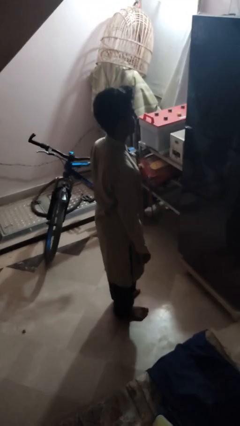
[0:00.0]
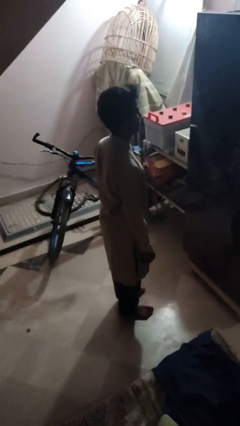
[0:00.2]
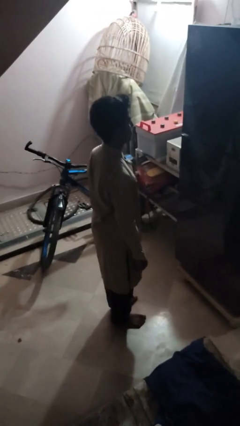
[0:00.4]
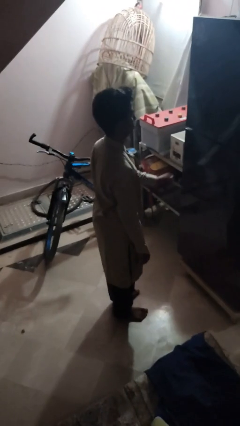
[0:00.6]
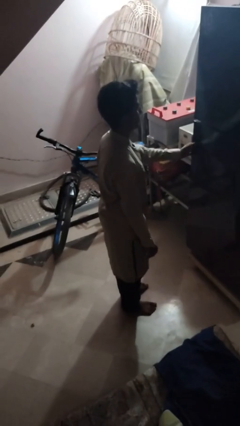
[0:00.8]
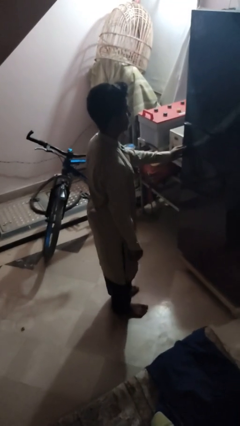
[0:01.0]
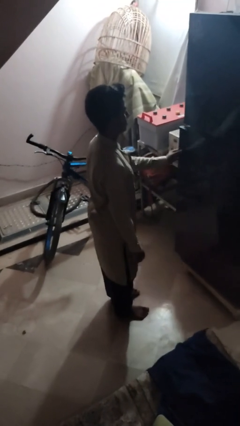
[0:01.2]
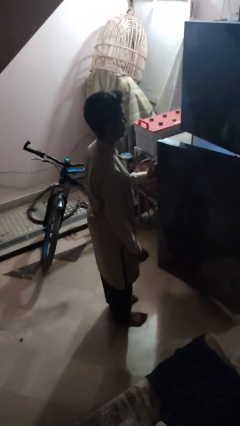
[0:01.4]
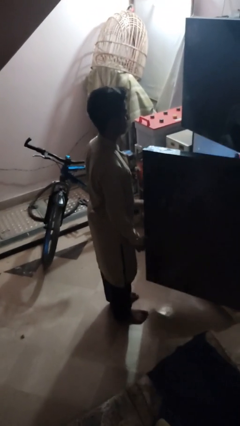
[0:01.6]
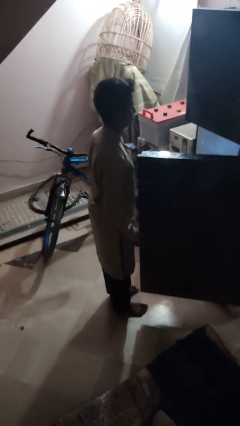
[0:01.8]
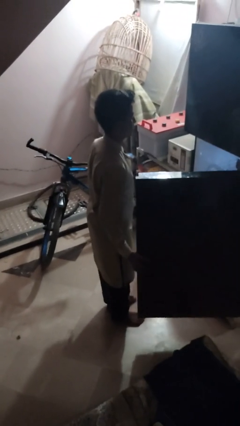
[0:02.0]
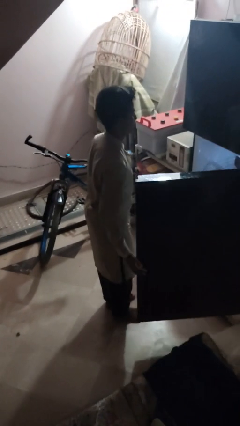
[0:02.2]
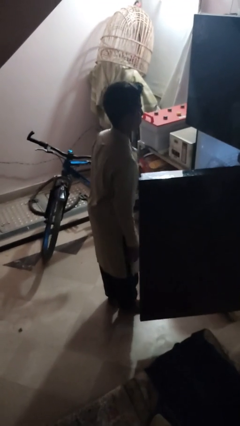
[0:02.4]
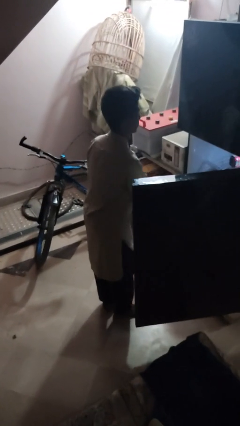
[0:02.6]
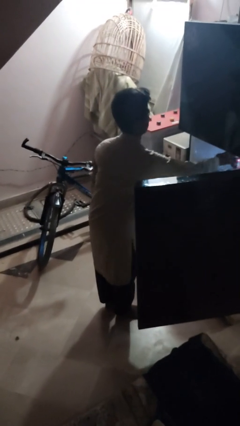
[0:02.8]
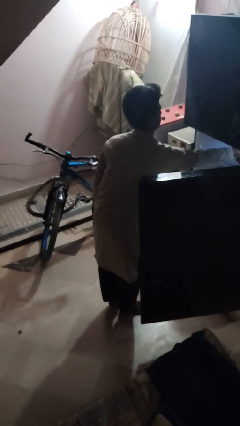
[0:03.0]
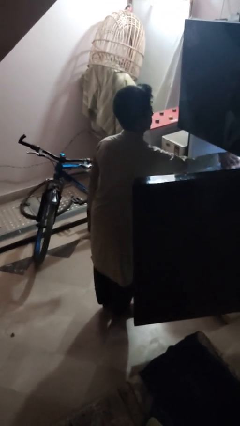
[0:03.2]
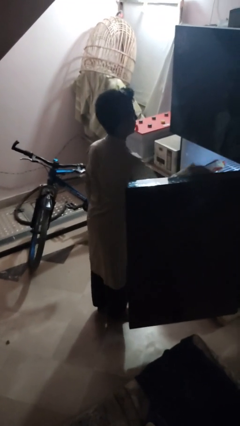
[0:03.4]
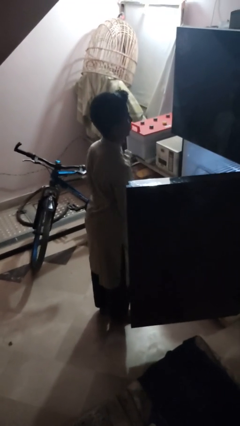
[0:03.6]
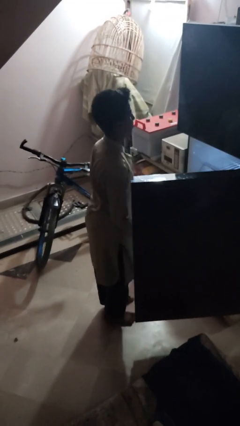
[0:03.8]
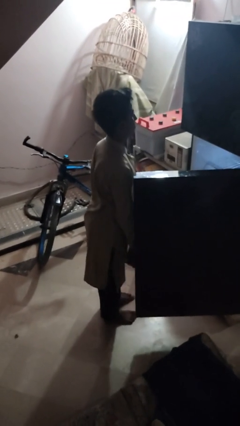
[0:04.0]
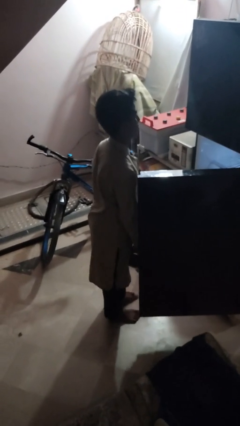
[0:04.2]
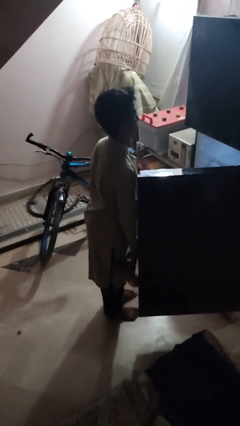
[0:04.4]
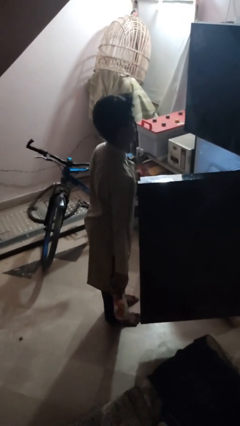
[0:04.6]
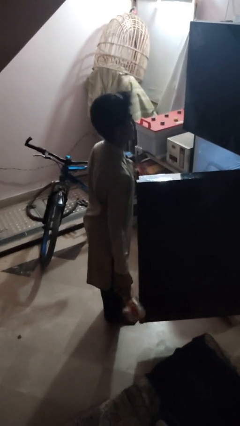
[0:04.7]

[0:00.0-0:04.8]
person takes object from refrigerator

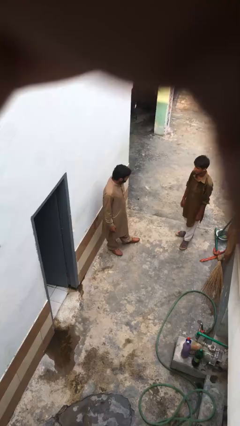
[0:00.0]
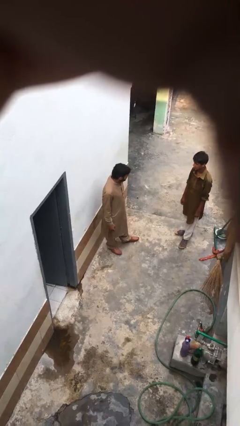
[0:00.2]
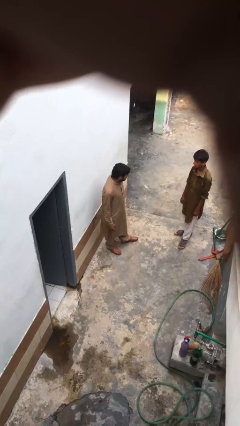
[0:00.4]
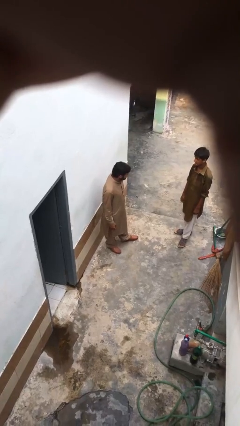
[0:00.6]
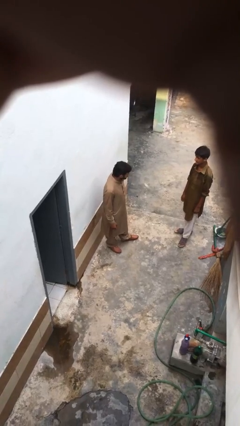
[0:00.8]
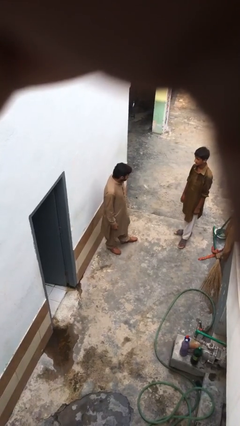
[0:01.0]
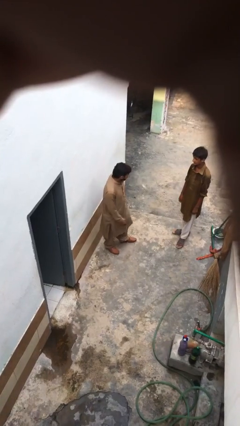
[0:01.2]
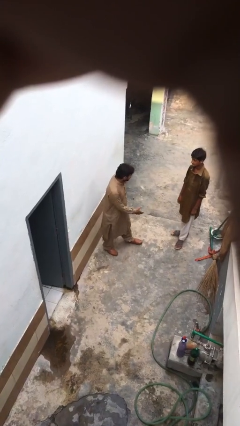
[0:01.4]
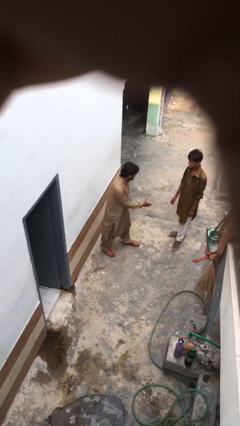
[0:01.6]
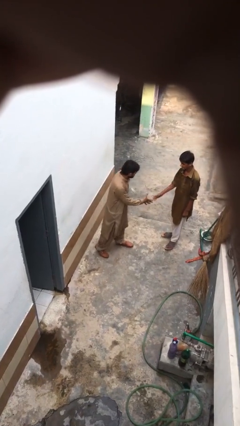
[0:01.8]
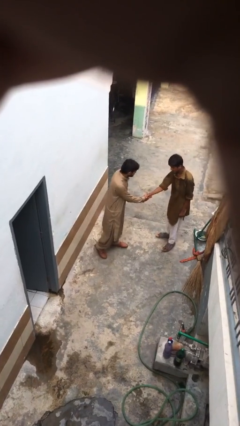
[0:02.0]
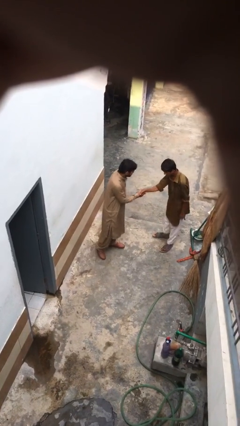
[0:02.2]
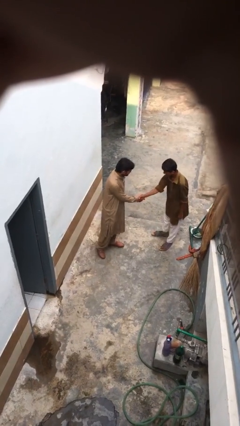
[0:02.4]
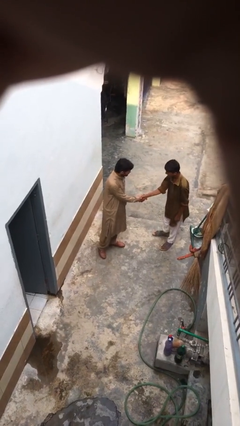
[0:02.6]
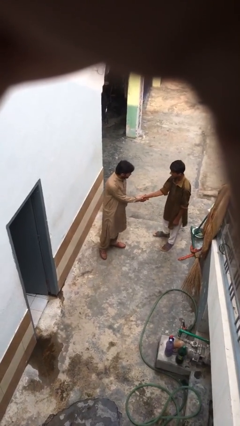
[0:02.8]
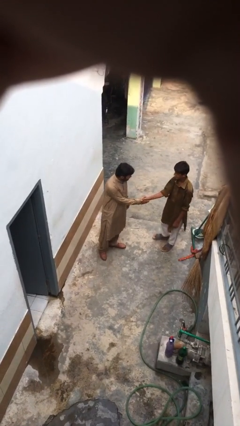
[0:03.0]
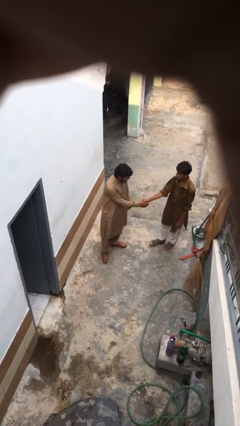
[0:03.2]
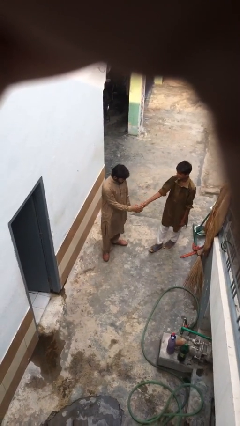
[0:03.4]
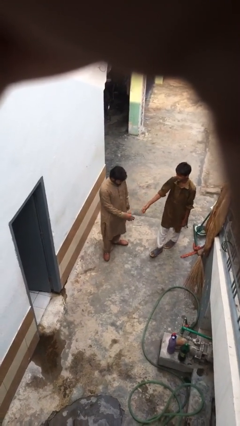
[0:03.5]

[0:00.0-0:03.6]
person shakes hand

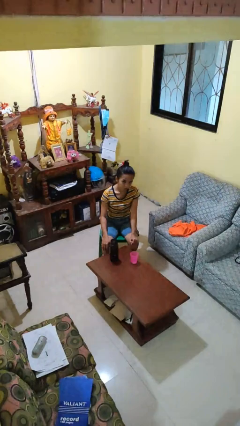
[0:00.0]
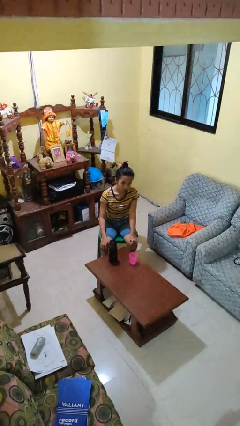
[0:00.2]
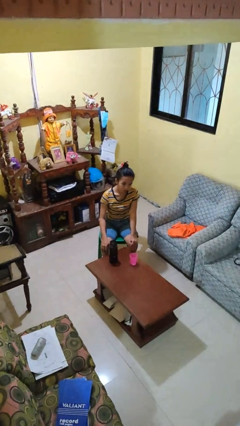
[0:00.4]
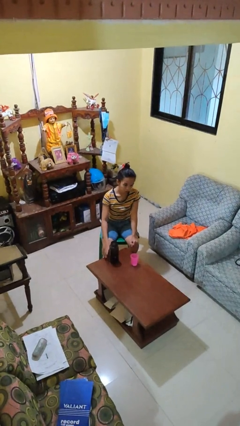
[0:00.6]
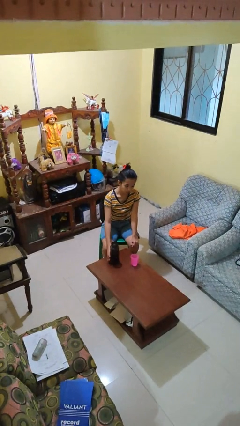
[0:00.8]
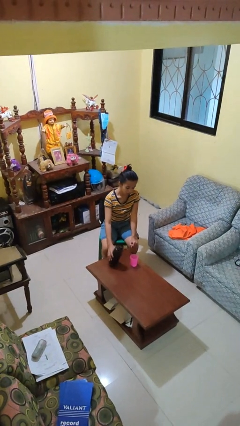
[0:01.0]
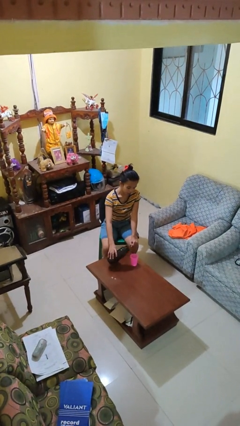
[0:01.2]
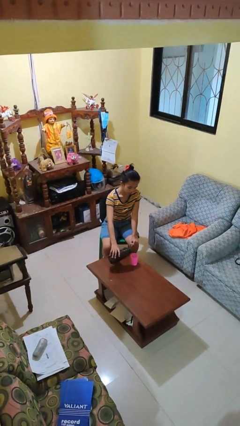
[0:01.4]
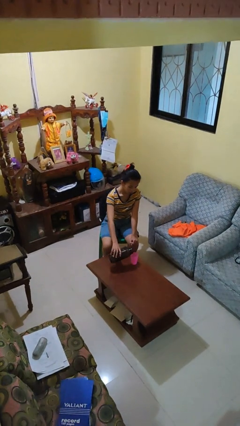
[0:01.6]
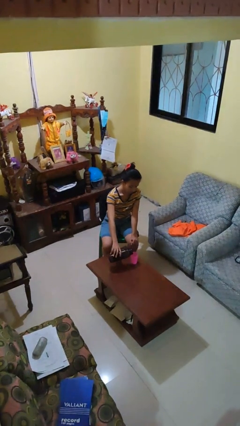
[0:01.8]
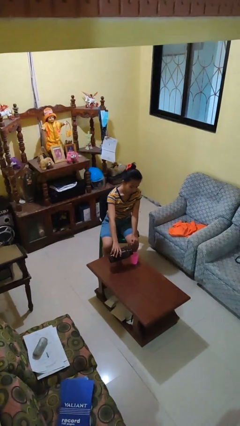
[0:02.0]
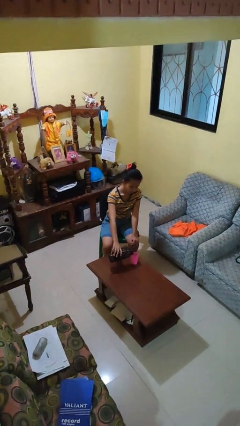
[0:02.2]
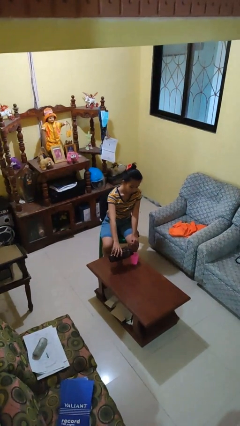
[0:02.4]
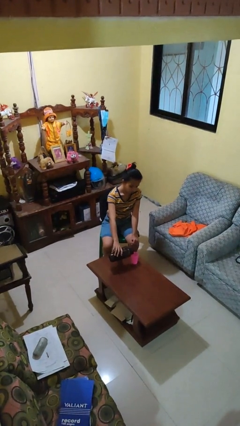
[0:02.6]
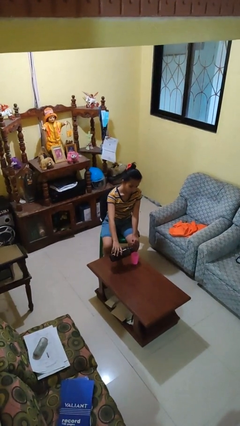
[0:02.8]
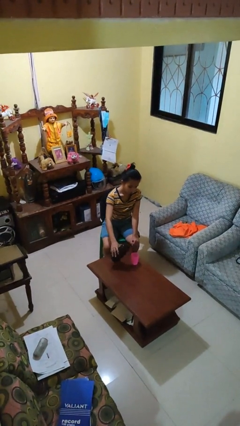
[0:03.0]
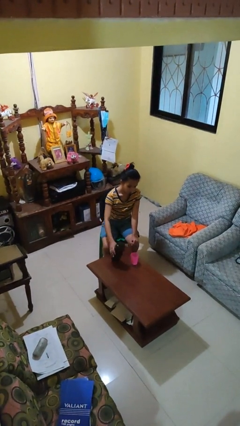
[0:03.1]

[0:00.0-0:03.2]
person pours liquid into cup

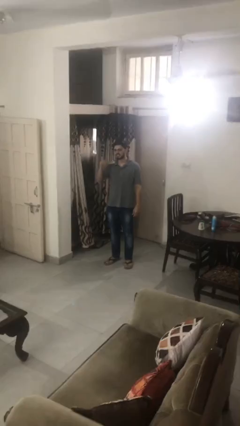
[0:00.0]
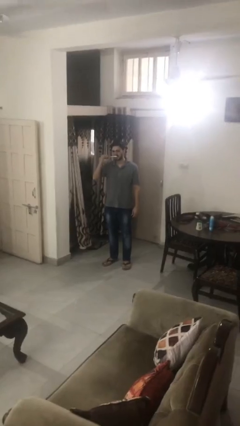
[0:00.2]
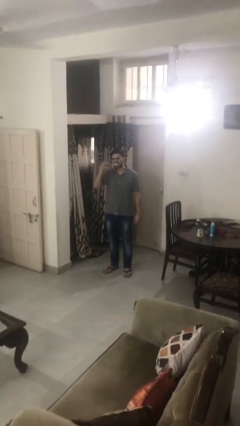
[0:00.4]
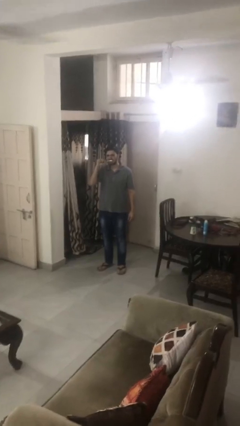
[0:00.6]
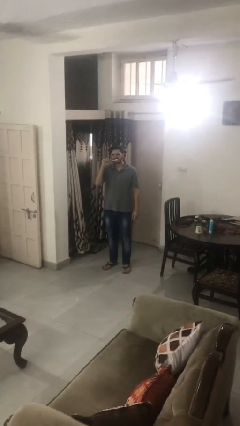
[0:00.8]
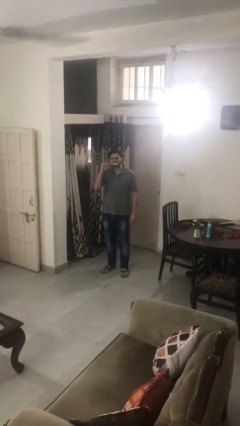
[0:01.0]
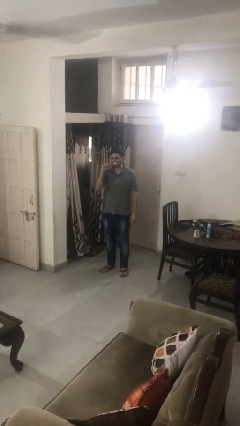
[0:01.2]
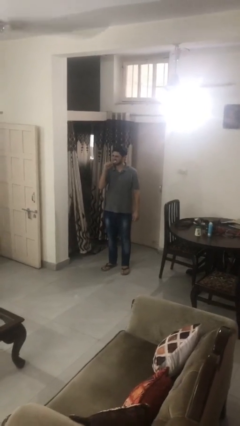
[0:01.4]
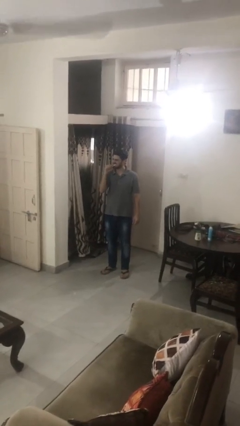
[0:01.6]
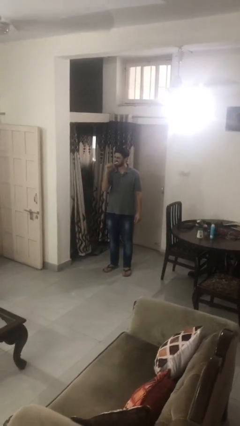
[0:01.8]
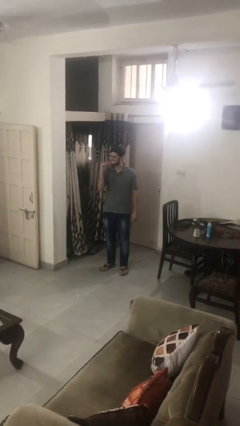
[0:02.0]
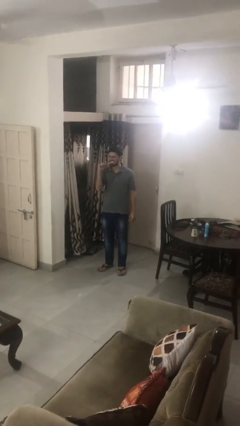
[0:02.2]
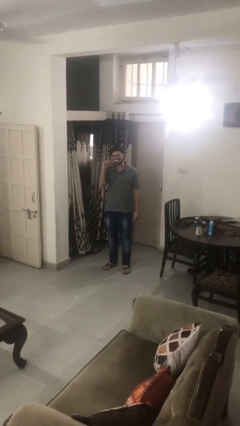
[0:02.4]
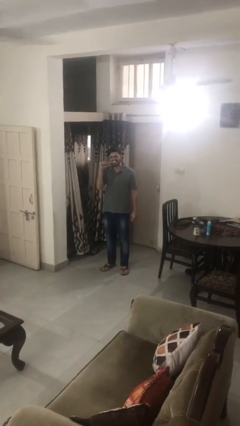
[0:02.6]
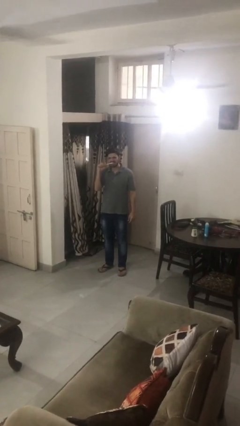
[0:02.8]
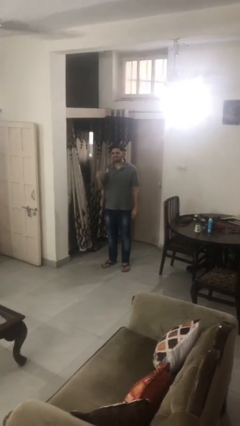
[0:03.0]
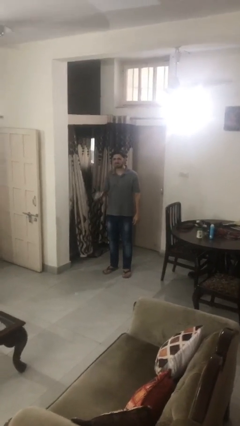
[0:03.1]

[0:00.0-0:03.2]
person brushes teeth

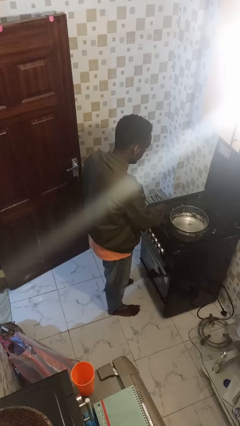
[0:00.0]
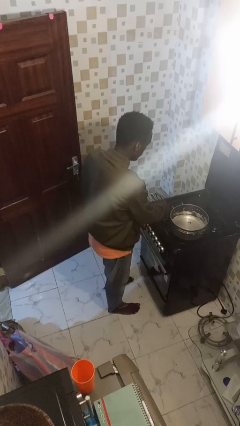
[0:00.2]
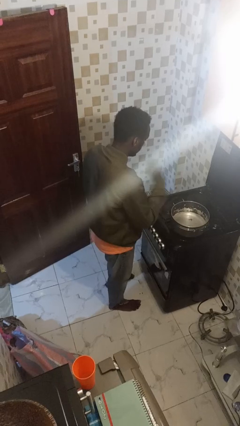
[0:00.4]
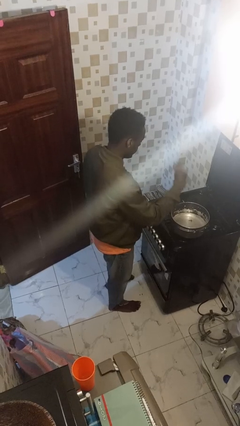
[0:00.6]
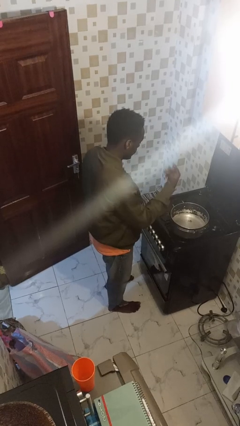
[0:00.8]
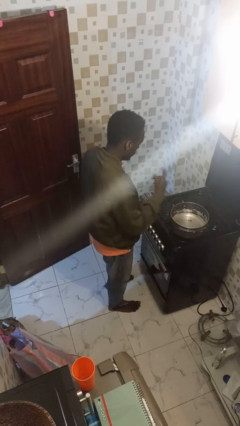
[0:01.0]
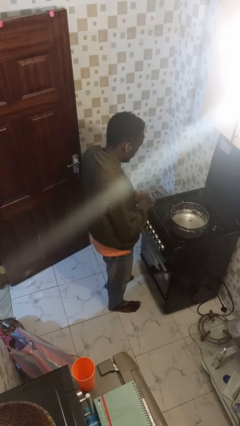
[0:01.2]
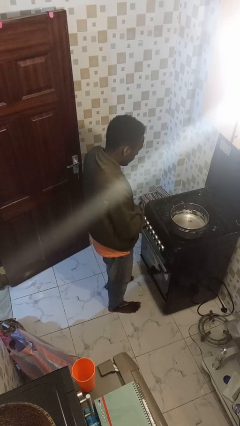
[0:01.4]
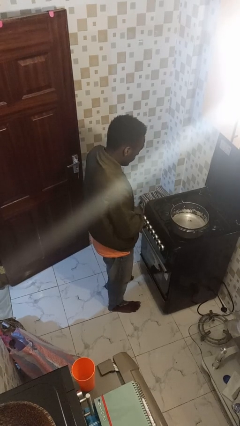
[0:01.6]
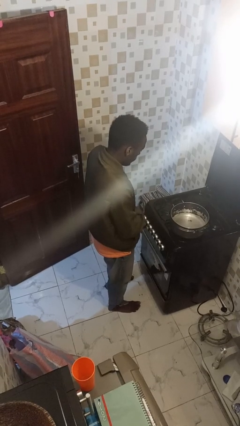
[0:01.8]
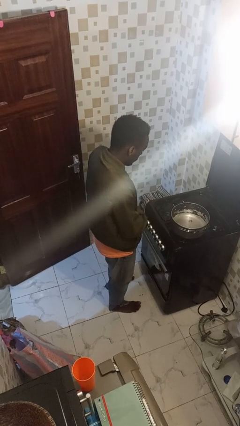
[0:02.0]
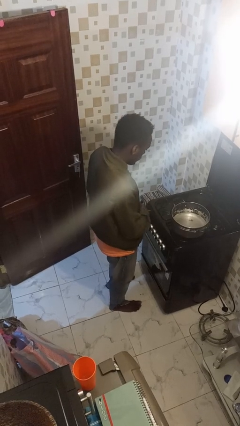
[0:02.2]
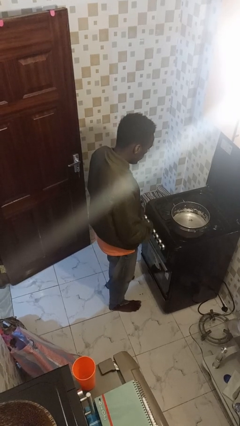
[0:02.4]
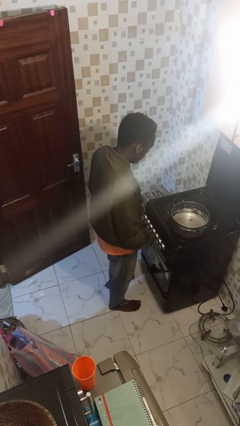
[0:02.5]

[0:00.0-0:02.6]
person burns hand

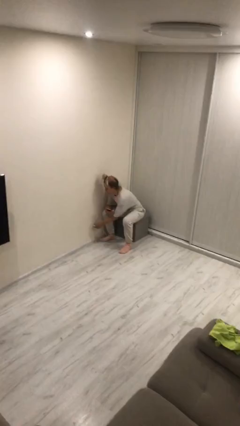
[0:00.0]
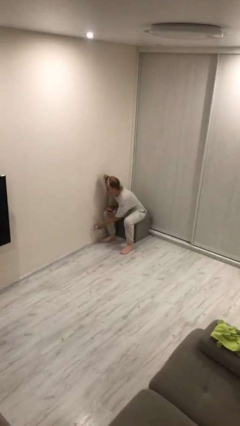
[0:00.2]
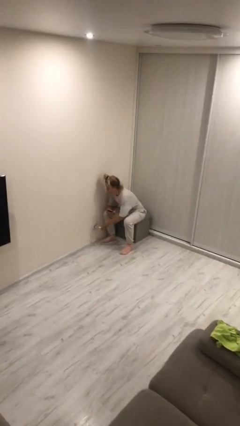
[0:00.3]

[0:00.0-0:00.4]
person unplugs from electrical socket
